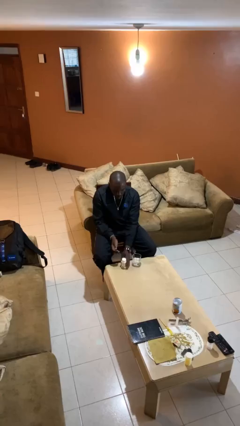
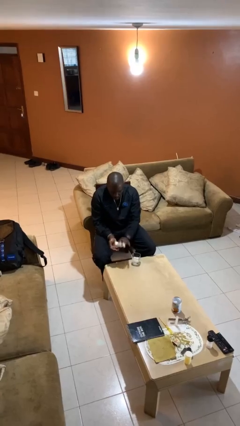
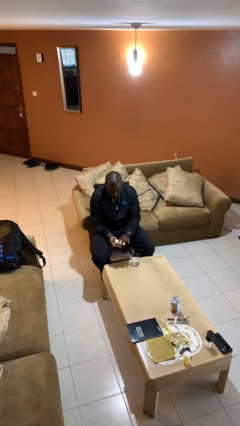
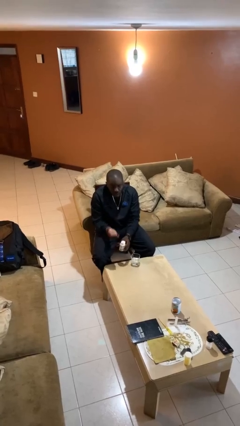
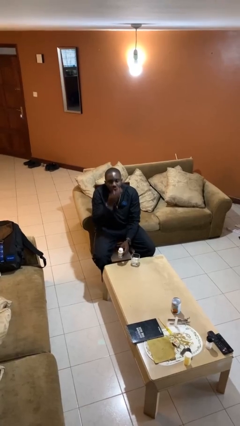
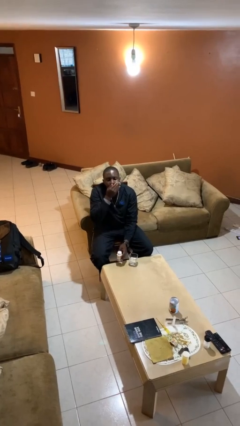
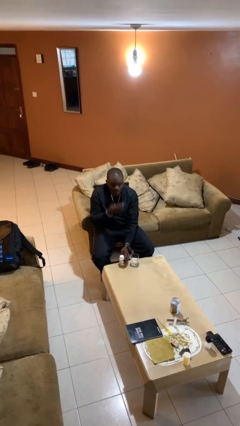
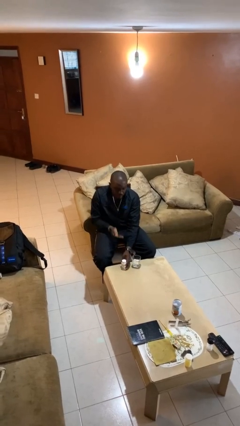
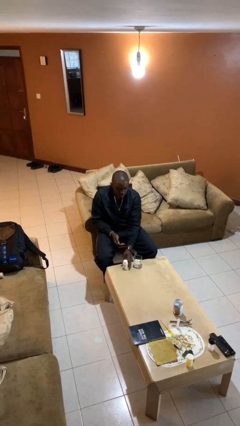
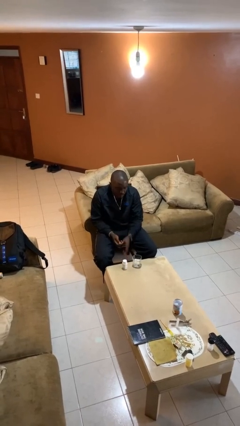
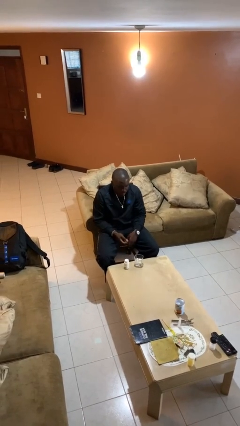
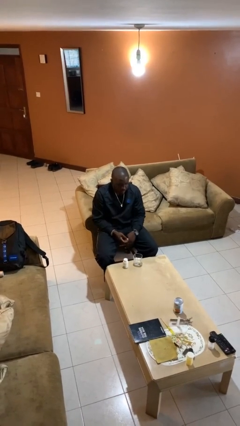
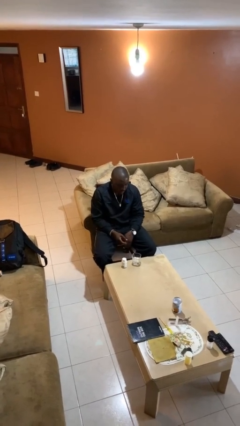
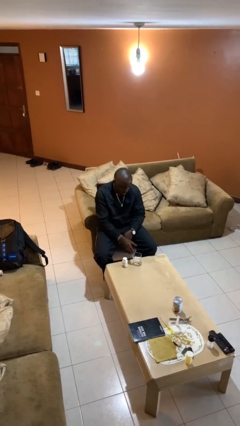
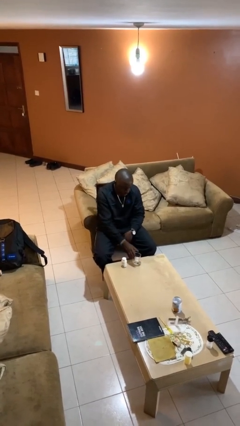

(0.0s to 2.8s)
person takes medicine pills

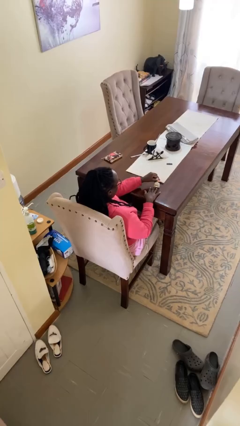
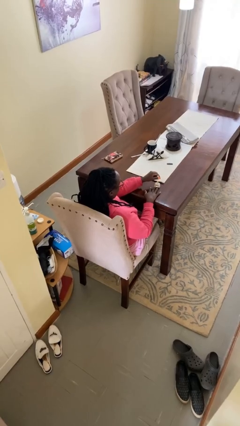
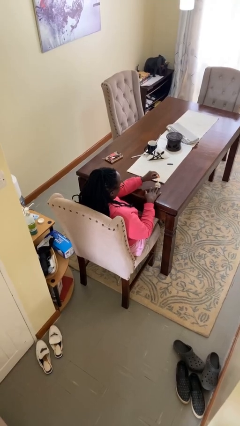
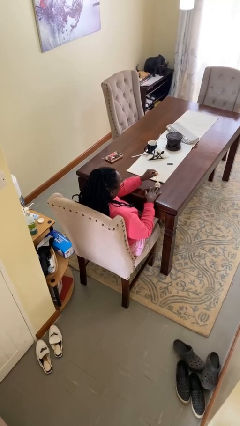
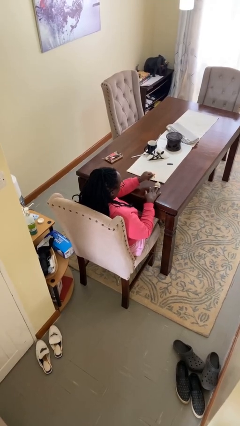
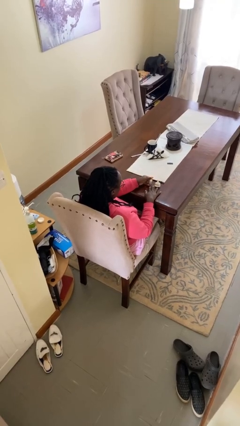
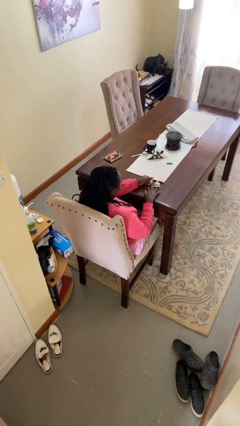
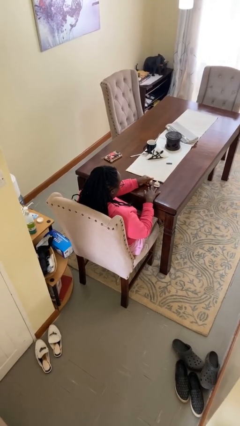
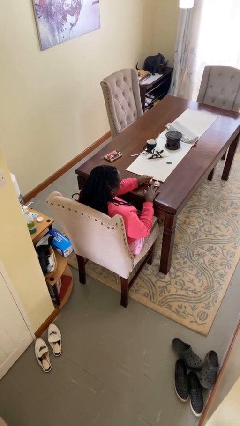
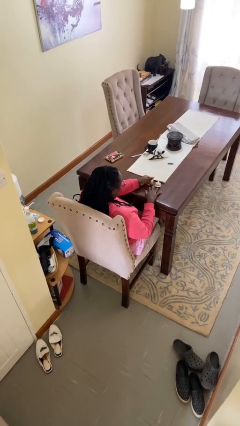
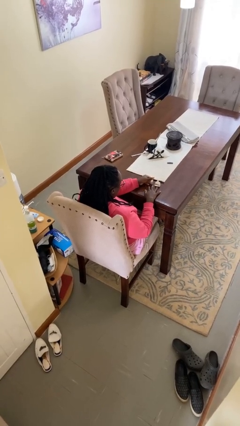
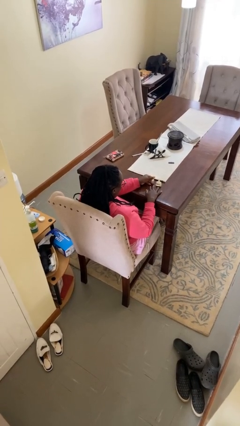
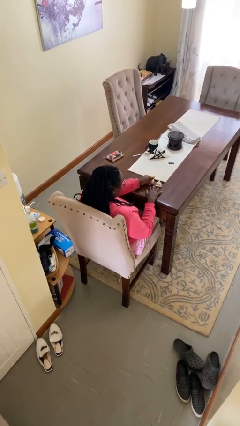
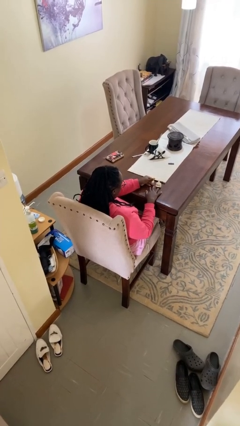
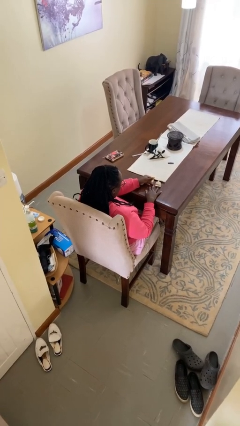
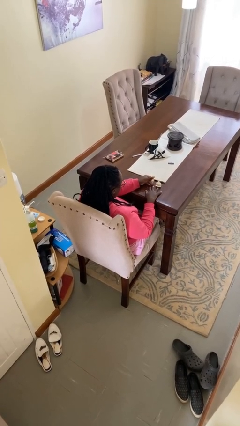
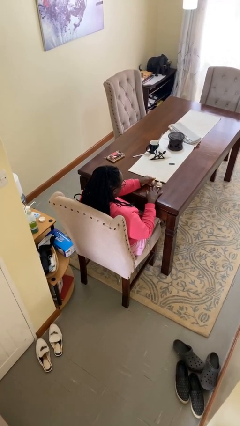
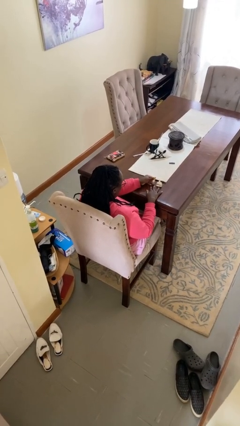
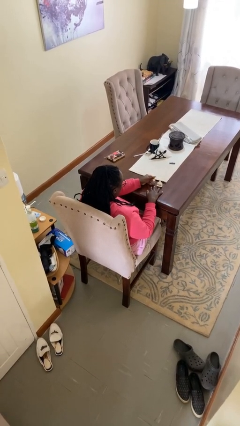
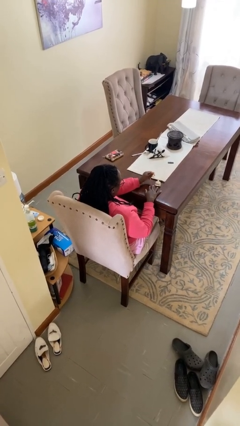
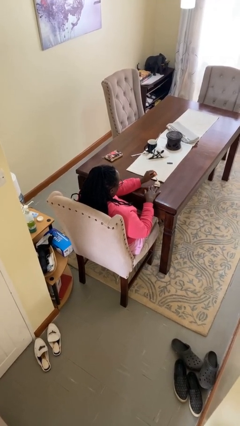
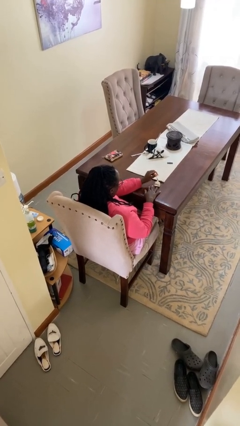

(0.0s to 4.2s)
person paints fingernails

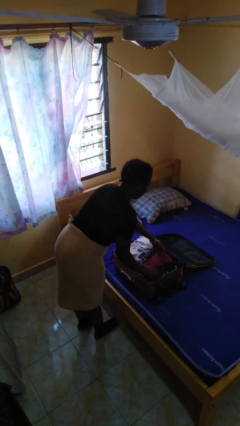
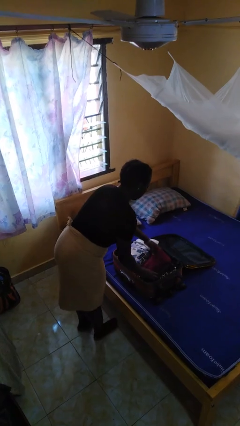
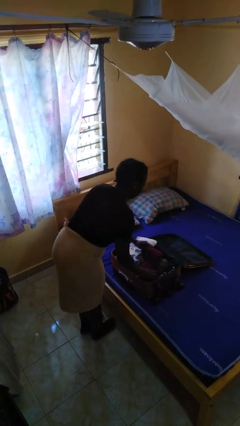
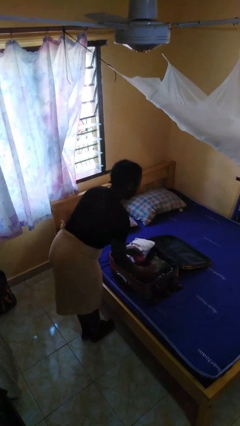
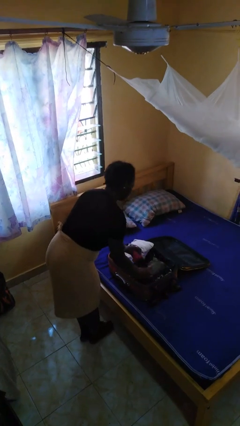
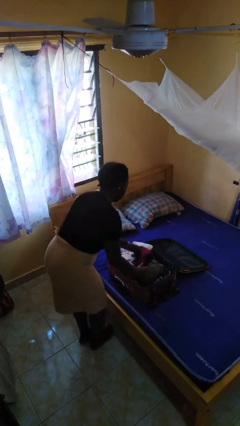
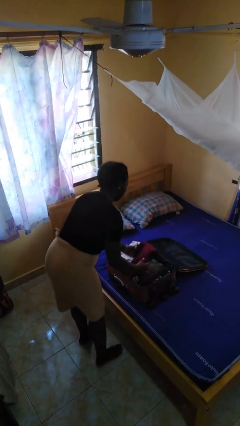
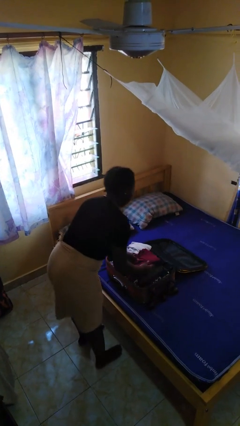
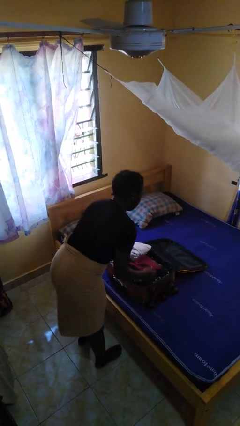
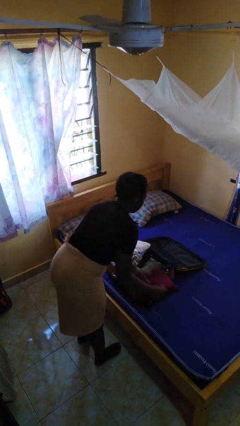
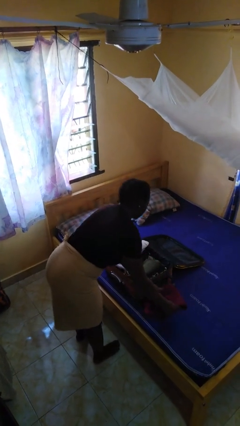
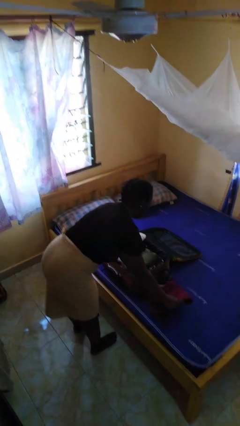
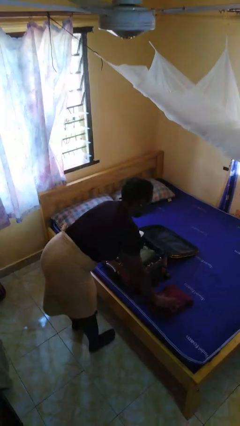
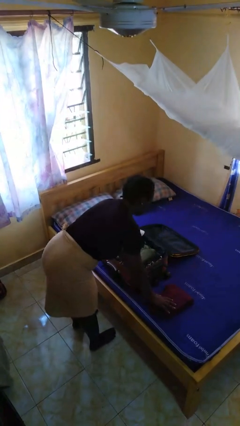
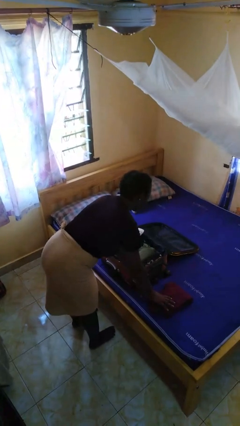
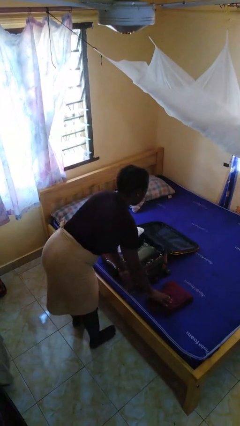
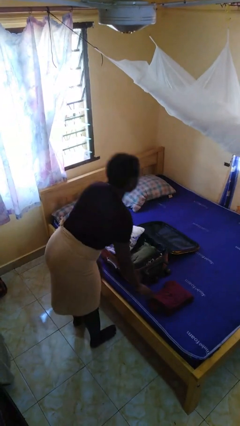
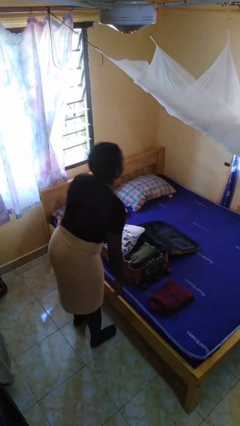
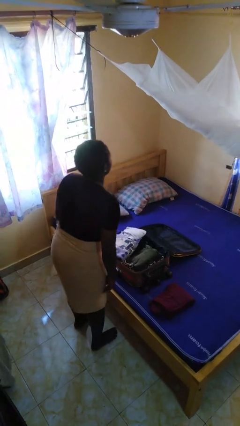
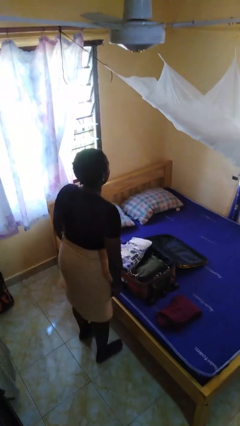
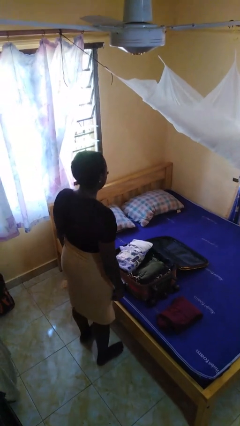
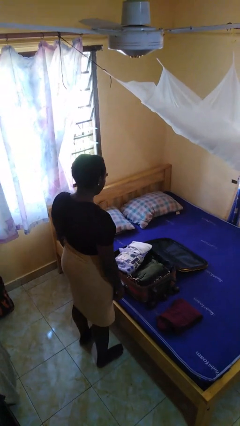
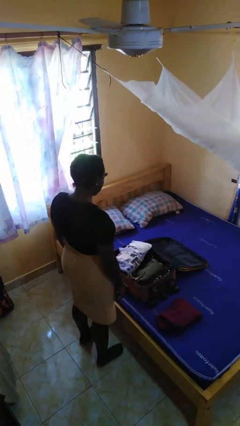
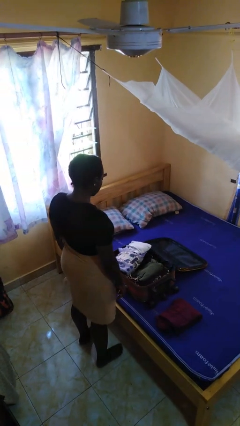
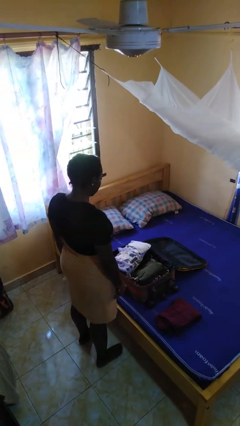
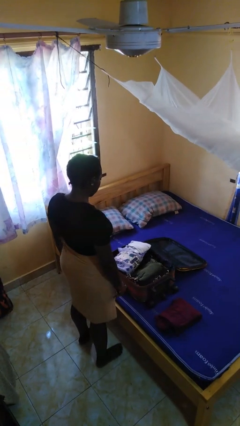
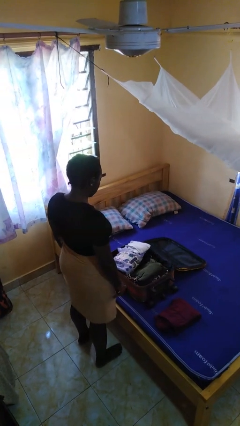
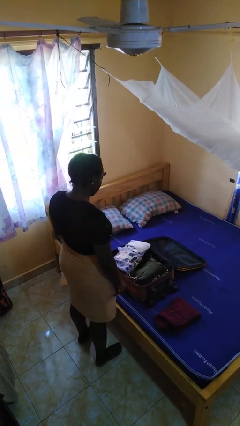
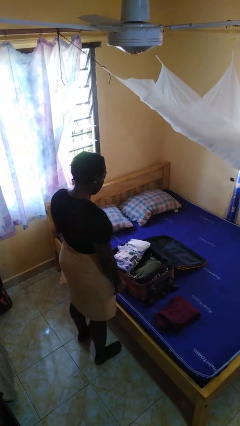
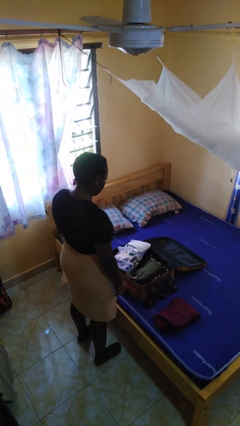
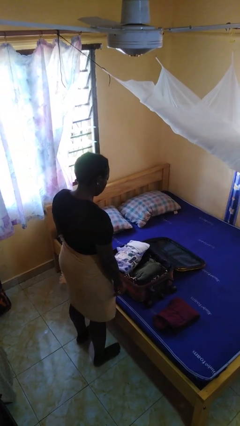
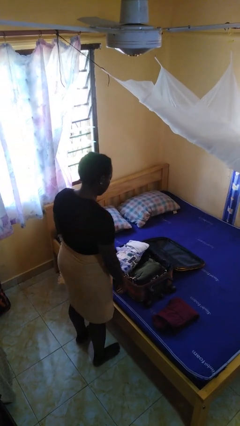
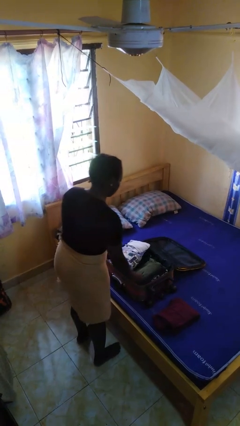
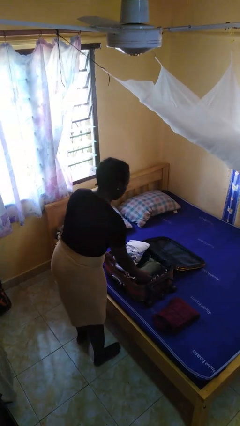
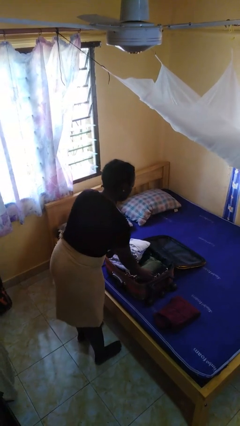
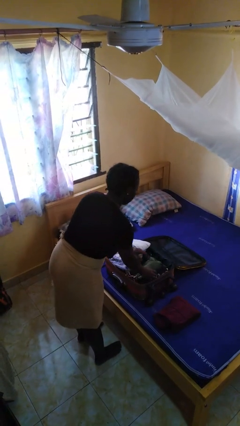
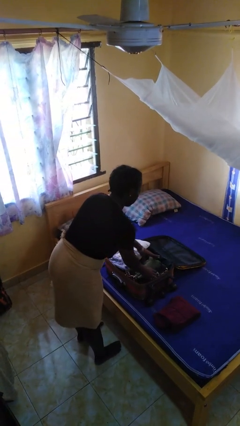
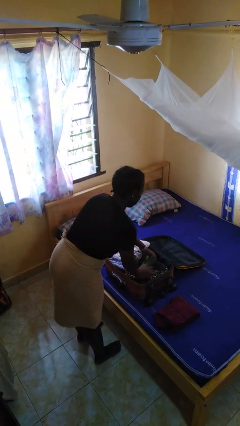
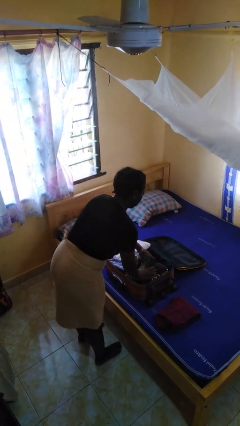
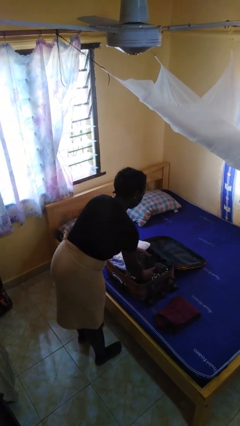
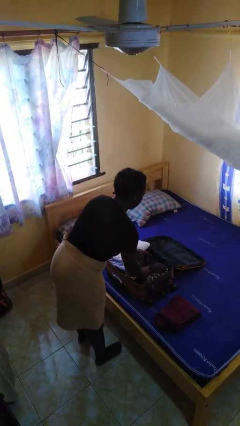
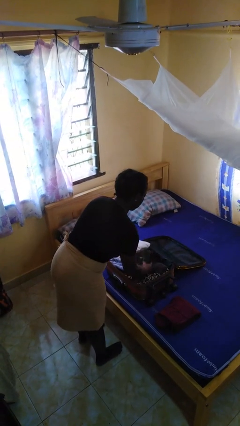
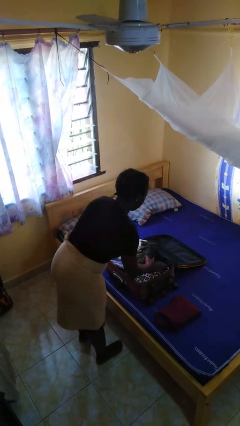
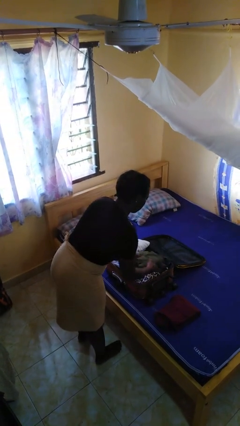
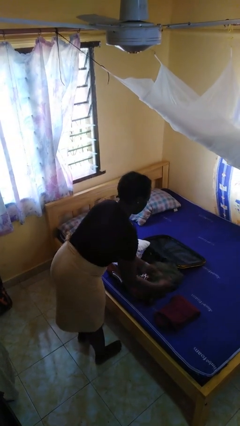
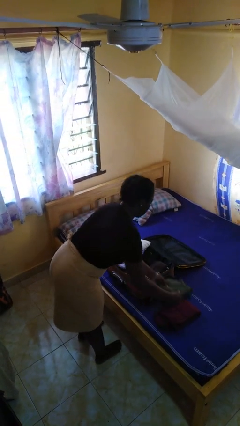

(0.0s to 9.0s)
person unloads clothes from suitcase

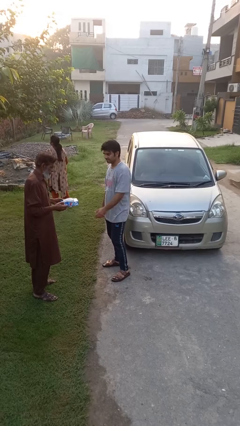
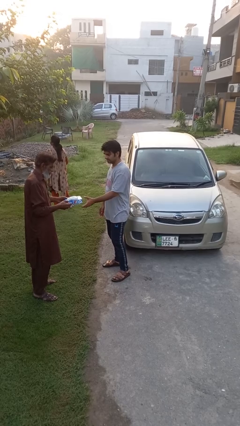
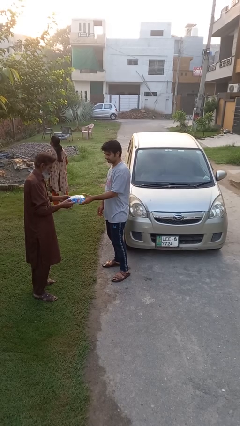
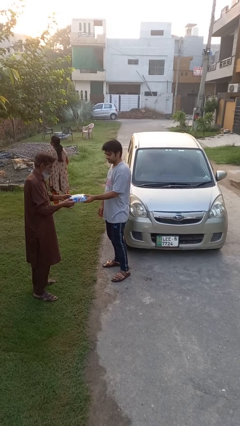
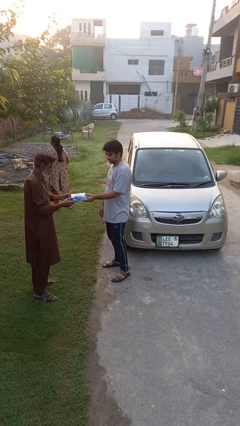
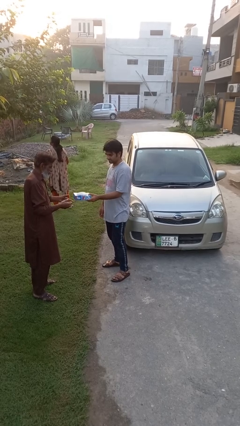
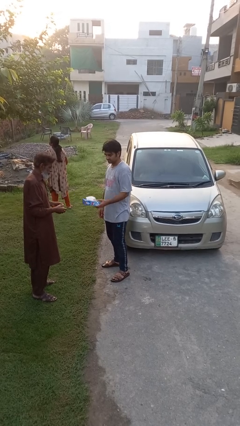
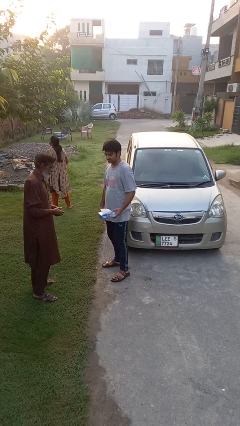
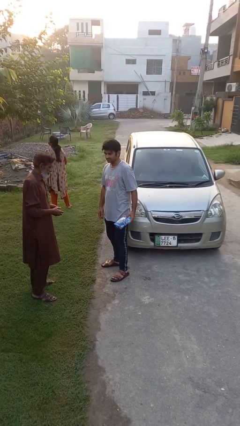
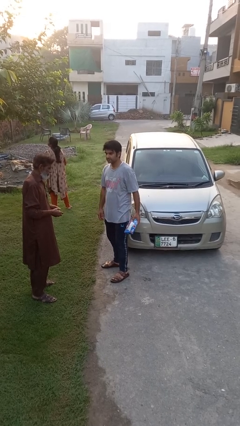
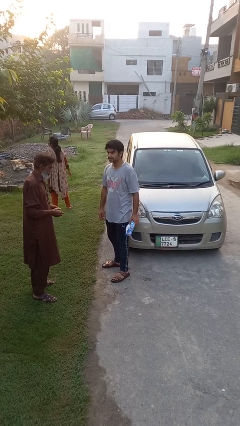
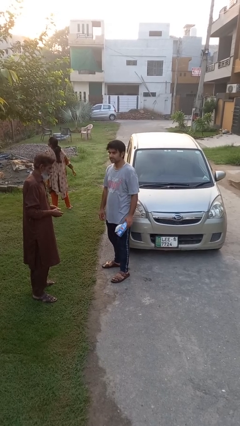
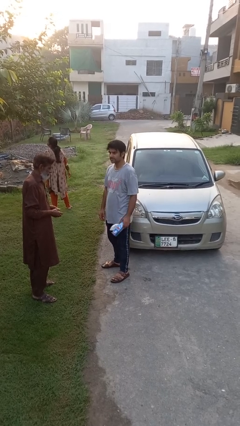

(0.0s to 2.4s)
person transfers object to person
